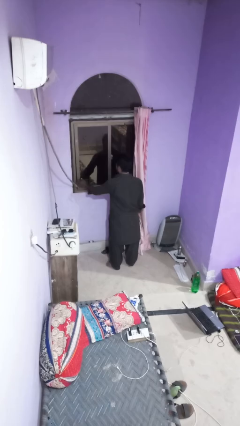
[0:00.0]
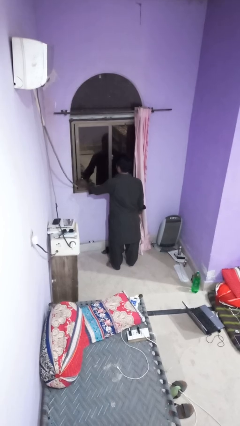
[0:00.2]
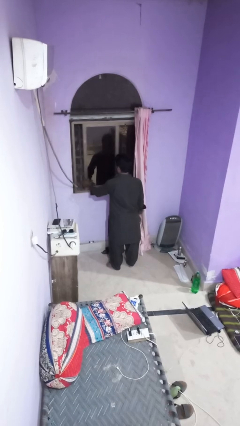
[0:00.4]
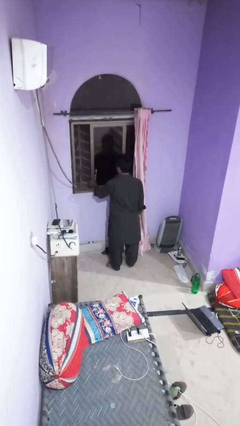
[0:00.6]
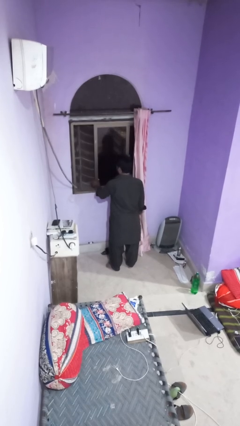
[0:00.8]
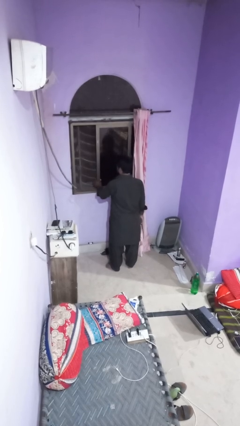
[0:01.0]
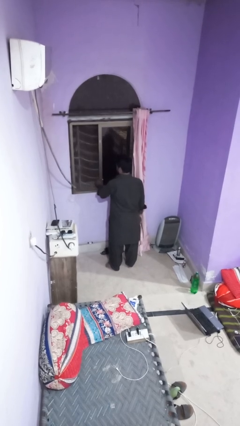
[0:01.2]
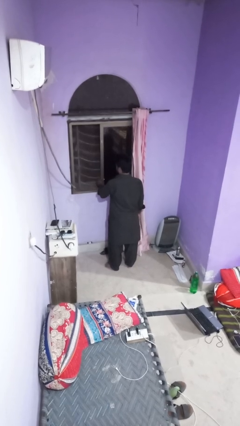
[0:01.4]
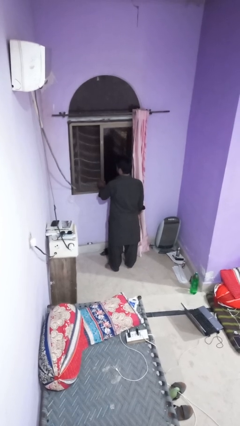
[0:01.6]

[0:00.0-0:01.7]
person opens home window

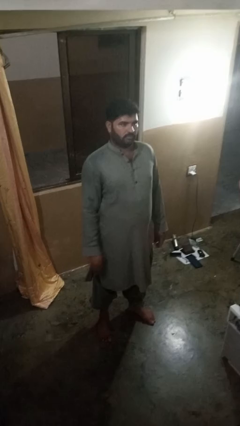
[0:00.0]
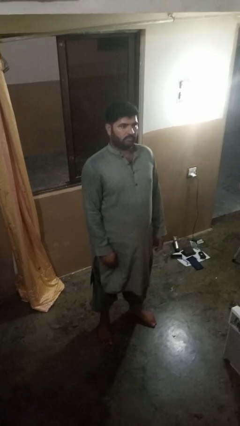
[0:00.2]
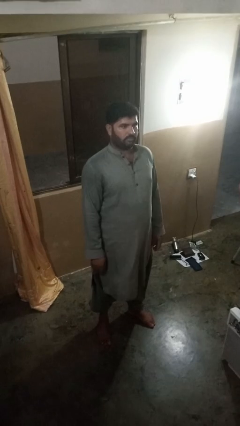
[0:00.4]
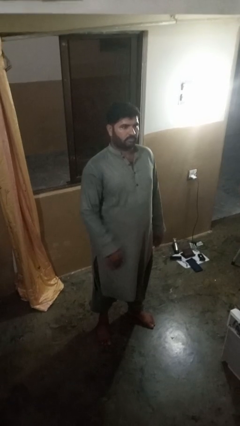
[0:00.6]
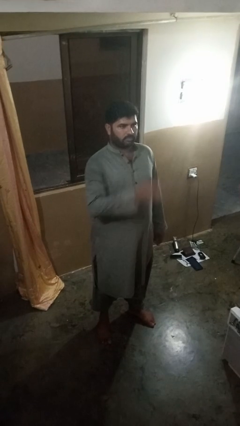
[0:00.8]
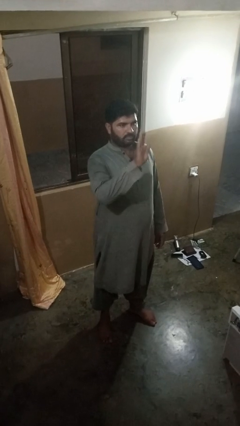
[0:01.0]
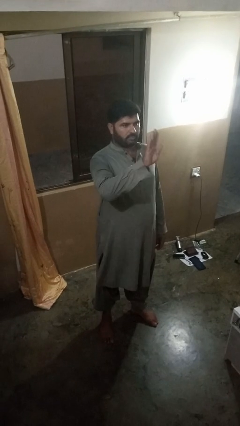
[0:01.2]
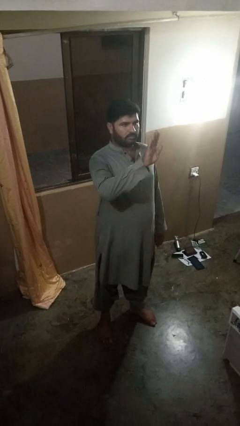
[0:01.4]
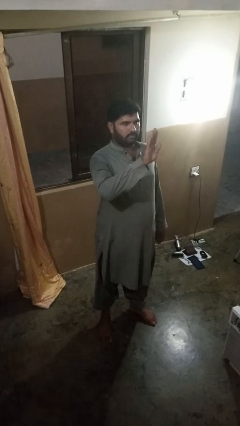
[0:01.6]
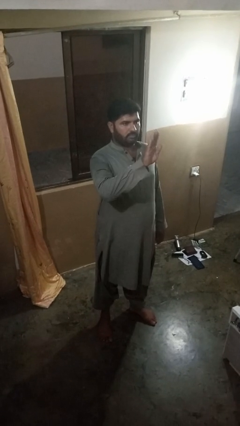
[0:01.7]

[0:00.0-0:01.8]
person gestures stop

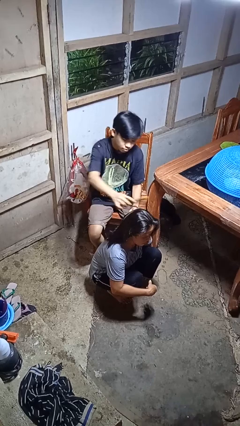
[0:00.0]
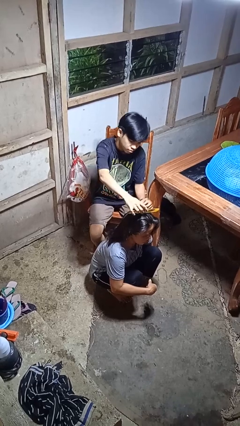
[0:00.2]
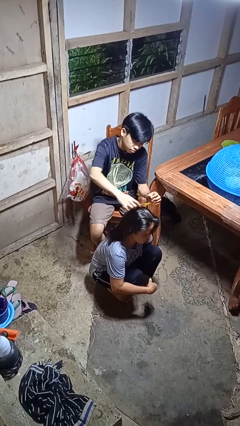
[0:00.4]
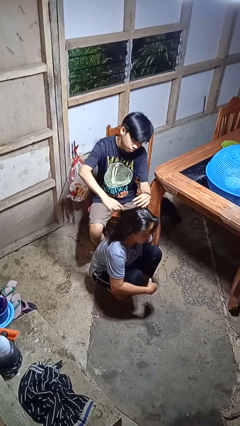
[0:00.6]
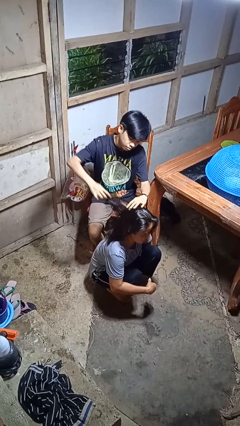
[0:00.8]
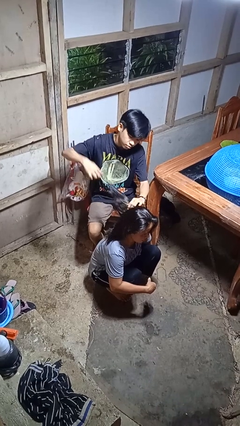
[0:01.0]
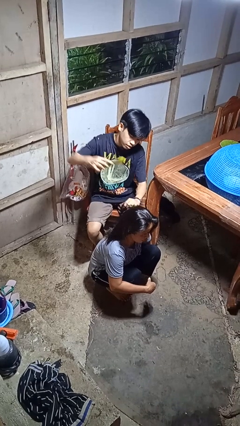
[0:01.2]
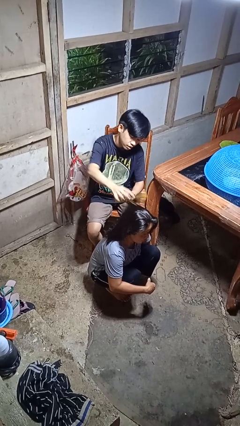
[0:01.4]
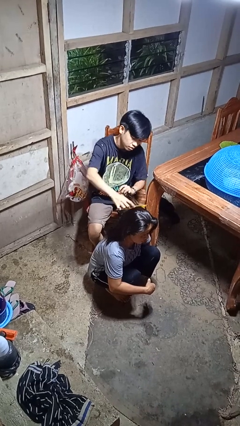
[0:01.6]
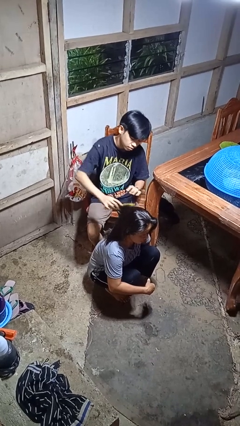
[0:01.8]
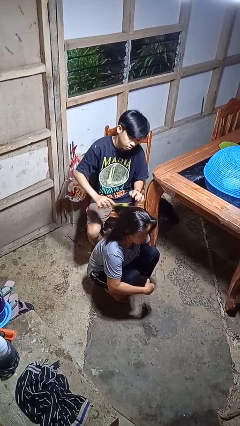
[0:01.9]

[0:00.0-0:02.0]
person brushes hair of person

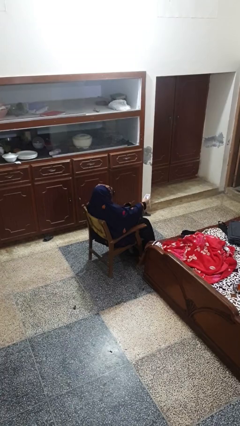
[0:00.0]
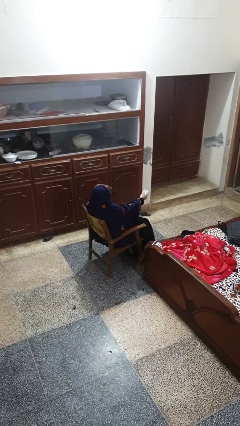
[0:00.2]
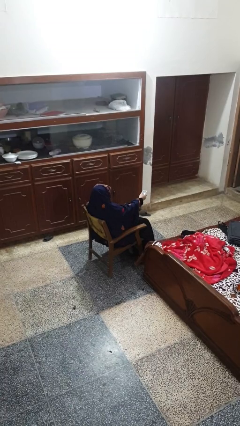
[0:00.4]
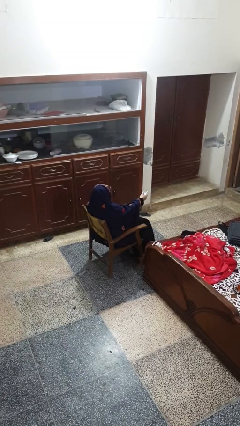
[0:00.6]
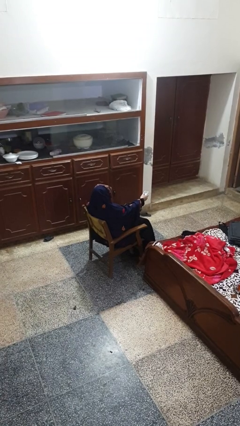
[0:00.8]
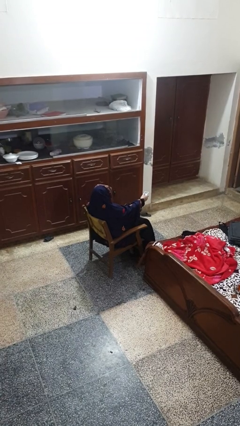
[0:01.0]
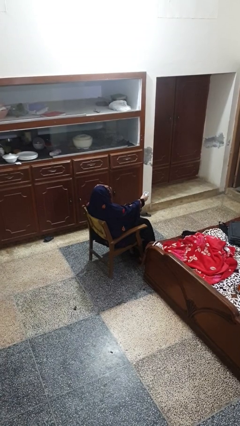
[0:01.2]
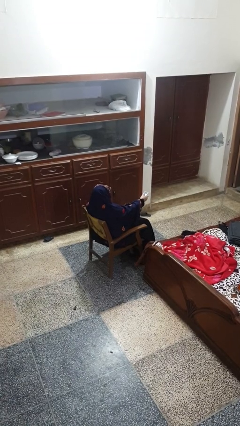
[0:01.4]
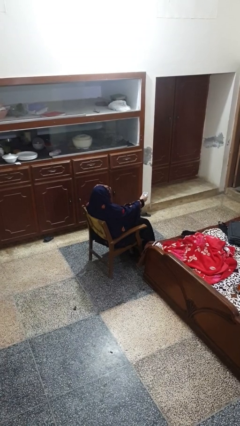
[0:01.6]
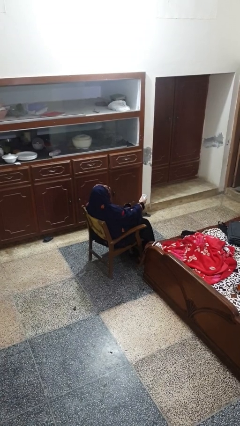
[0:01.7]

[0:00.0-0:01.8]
person uses television remote

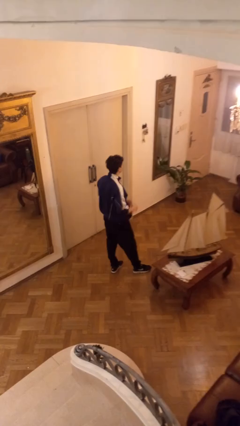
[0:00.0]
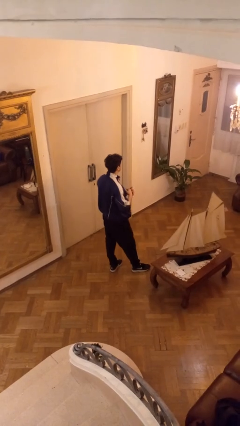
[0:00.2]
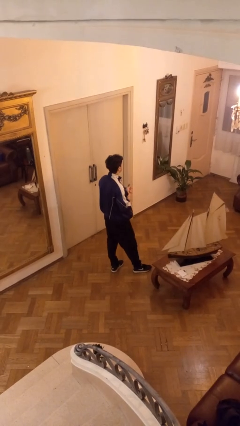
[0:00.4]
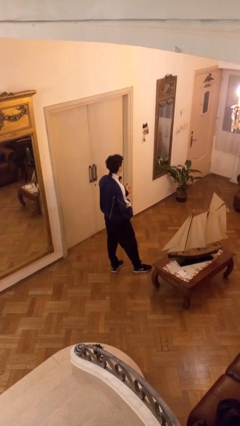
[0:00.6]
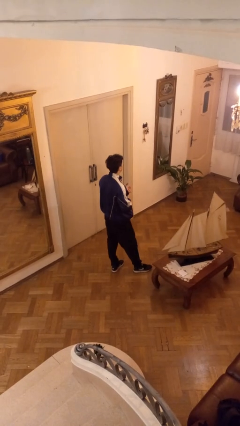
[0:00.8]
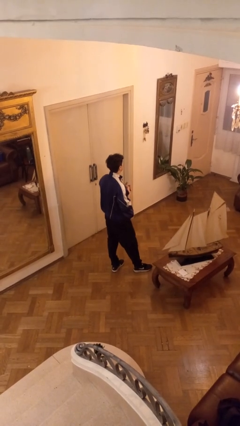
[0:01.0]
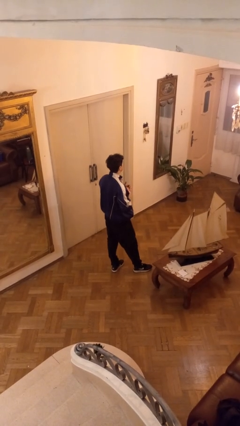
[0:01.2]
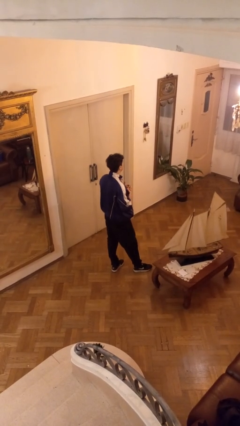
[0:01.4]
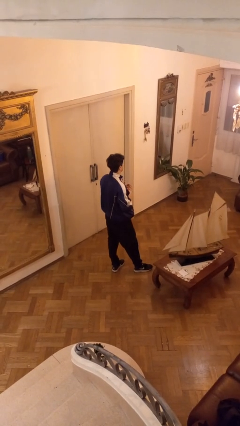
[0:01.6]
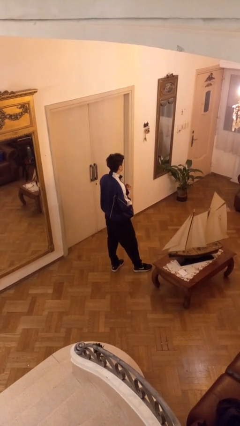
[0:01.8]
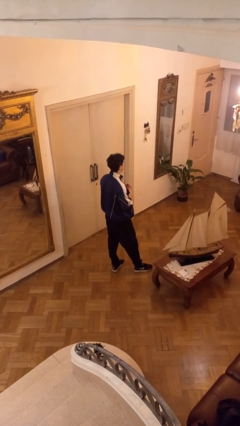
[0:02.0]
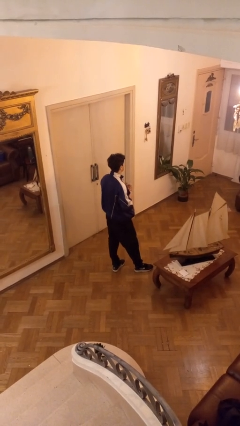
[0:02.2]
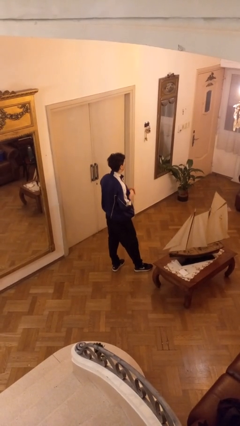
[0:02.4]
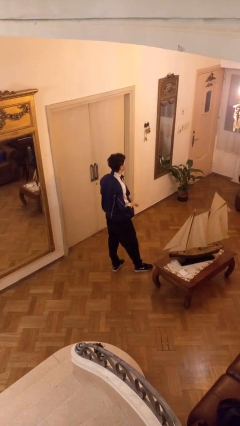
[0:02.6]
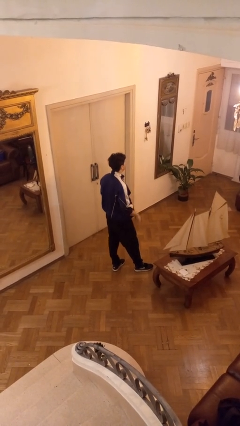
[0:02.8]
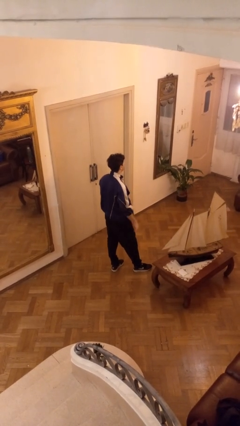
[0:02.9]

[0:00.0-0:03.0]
person cracks knuckles

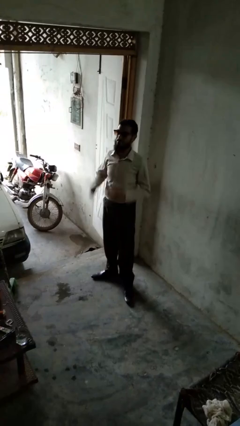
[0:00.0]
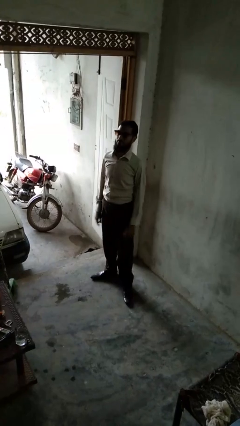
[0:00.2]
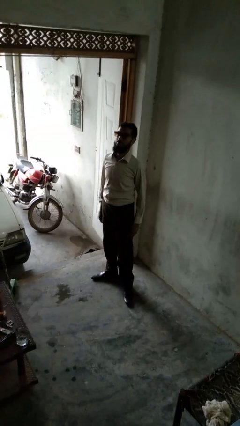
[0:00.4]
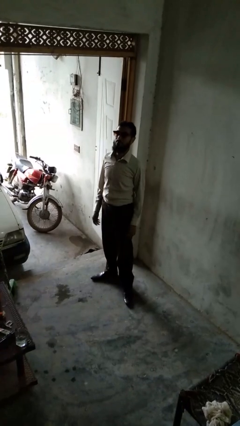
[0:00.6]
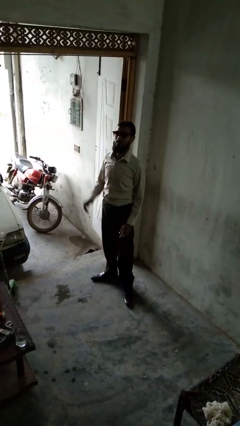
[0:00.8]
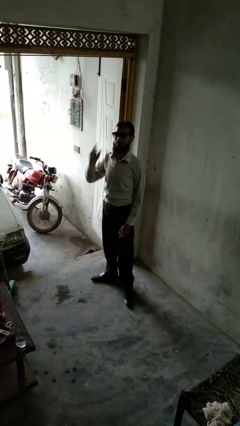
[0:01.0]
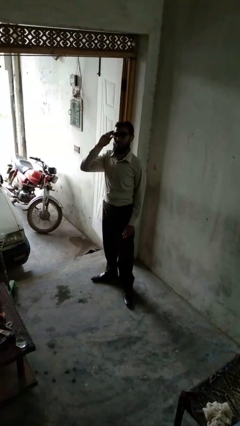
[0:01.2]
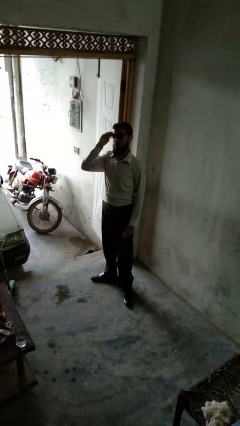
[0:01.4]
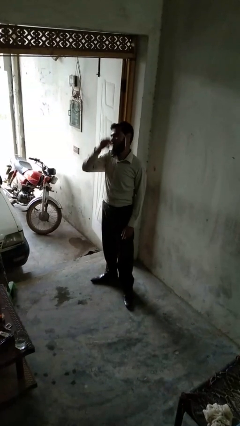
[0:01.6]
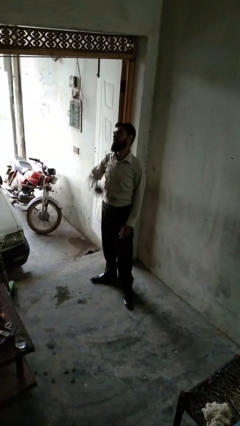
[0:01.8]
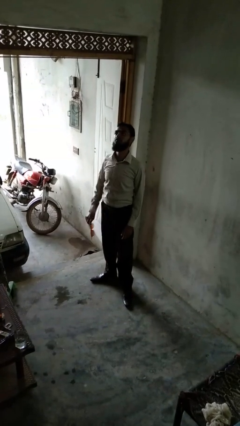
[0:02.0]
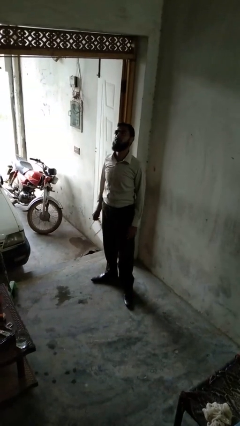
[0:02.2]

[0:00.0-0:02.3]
person takes off sunglasses

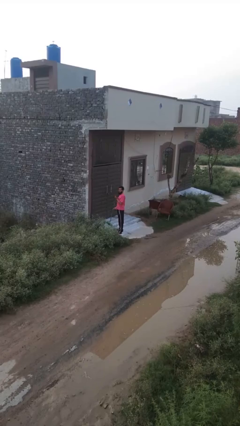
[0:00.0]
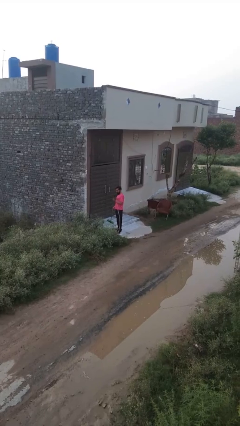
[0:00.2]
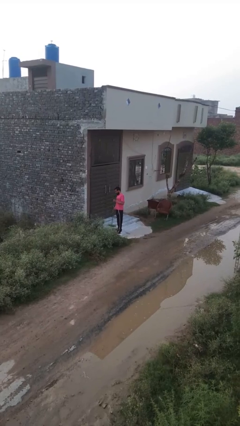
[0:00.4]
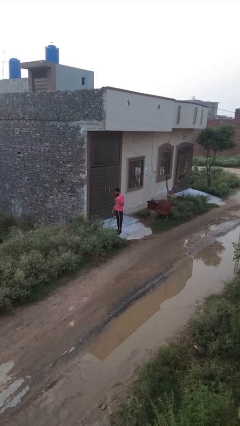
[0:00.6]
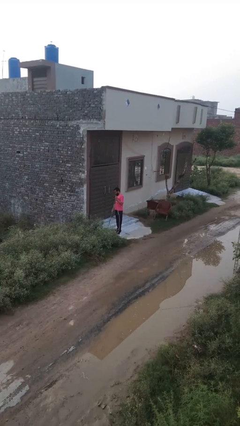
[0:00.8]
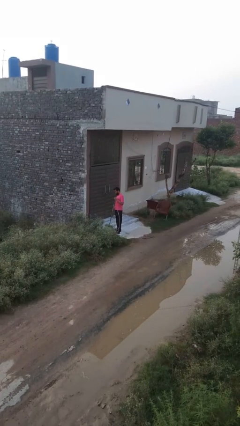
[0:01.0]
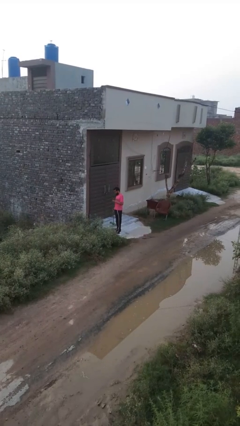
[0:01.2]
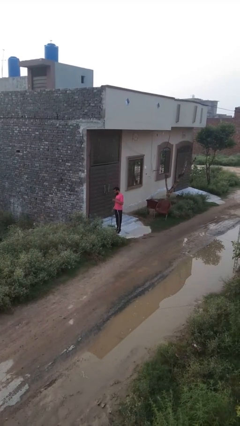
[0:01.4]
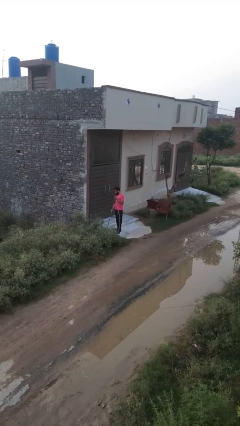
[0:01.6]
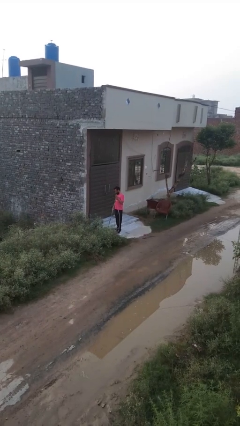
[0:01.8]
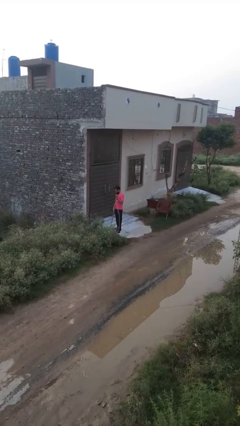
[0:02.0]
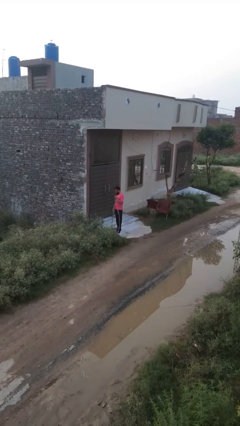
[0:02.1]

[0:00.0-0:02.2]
person sweeps floor

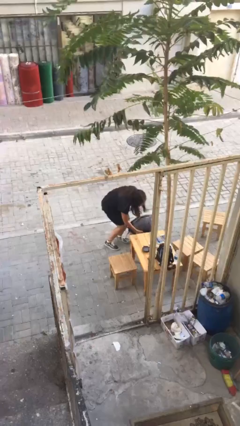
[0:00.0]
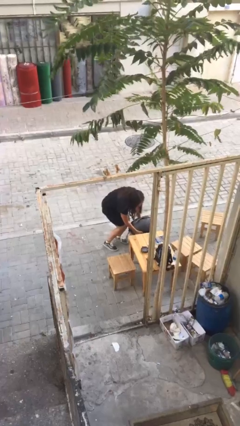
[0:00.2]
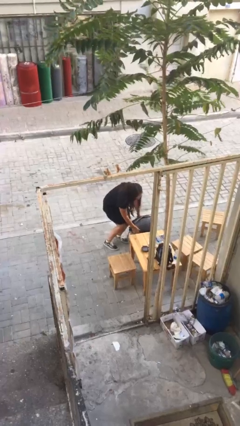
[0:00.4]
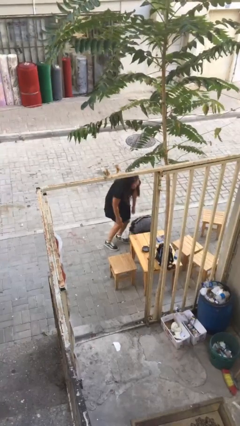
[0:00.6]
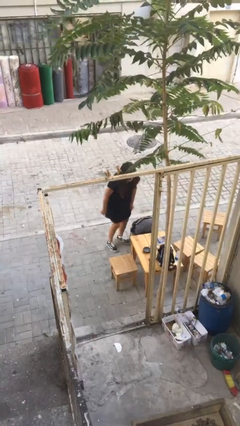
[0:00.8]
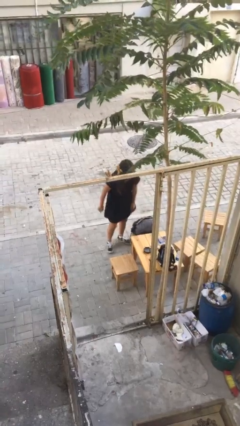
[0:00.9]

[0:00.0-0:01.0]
person puts down object on floor

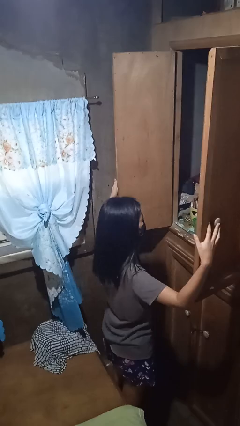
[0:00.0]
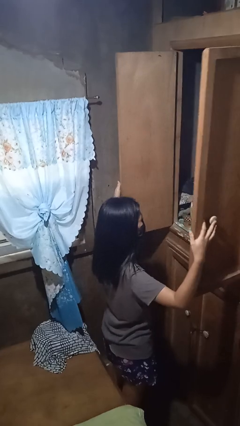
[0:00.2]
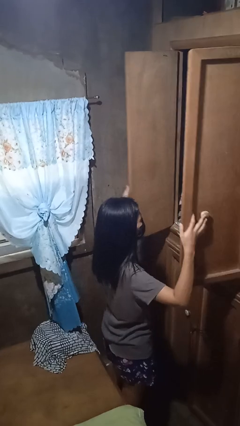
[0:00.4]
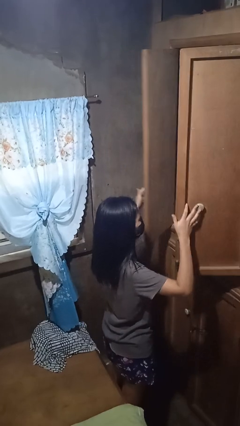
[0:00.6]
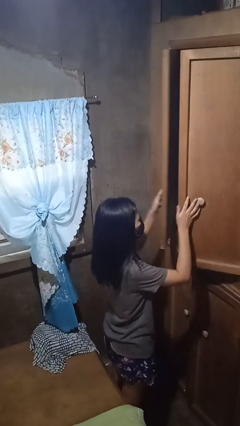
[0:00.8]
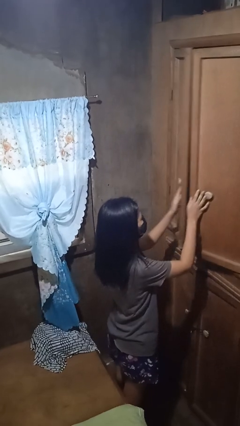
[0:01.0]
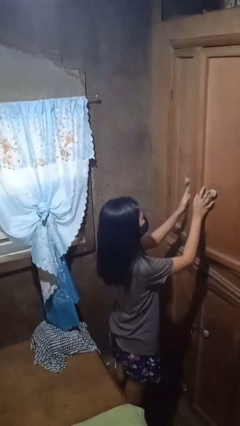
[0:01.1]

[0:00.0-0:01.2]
person closes closet door
